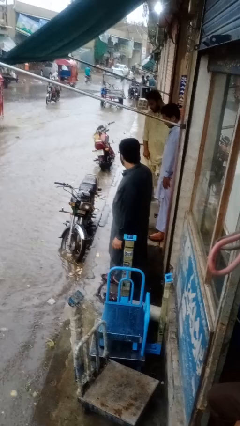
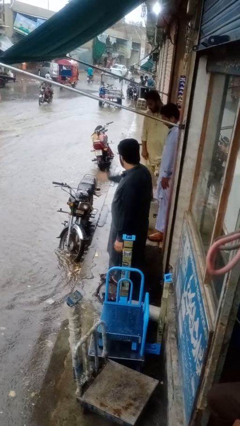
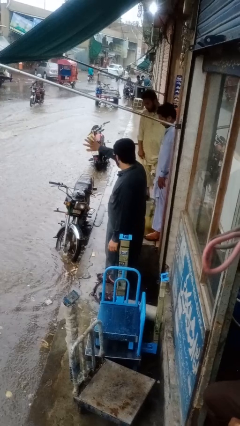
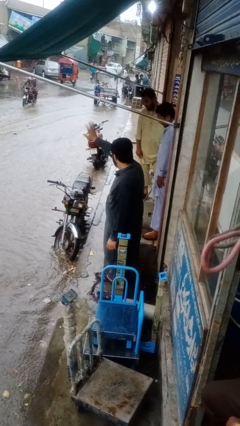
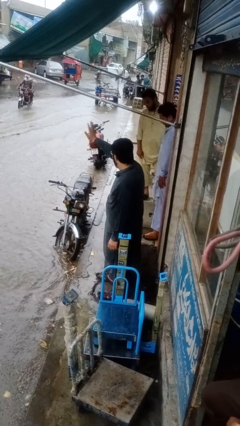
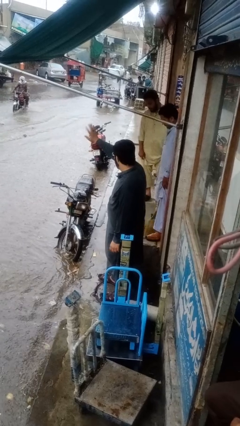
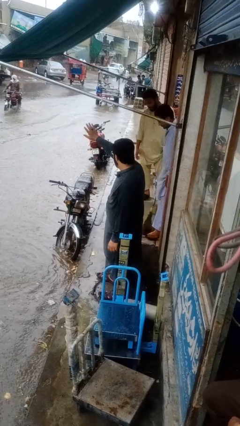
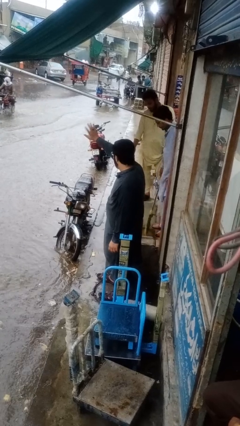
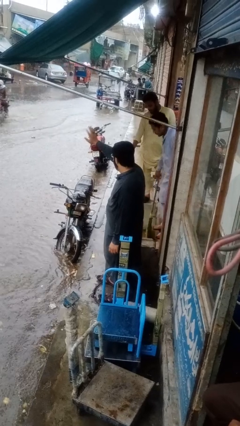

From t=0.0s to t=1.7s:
person waves at person

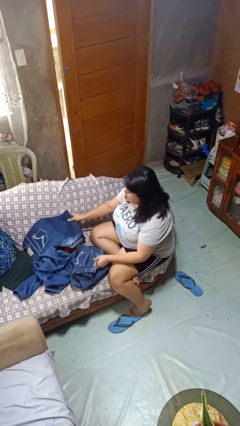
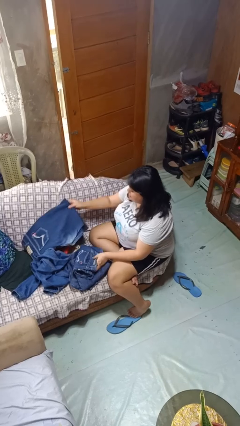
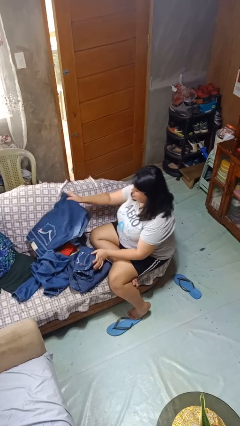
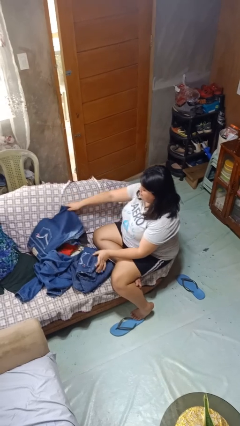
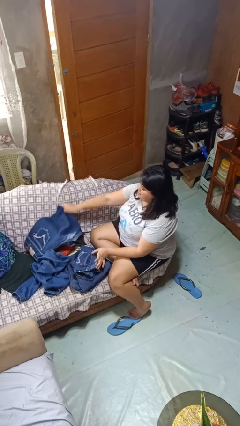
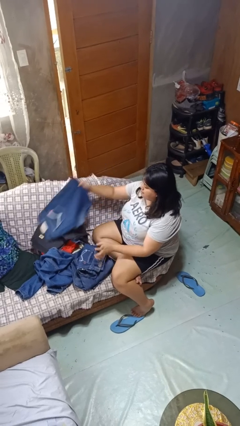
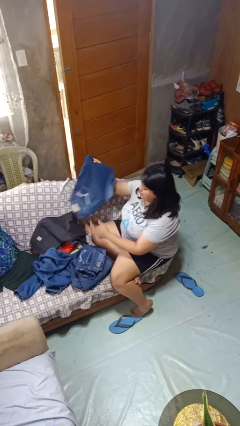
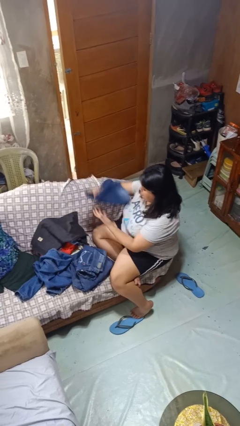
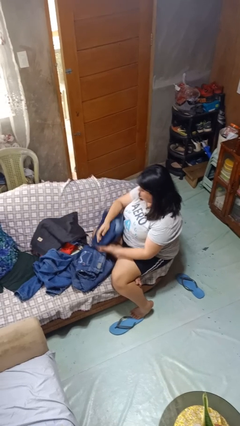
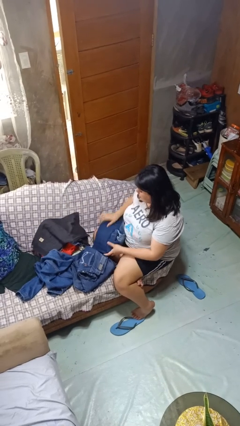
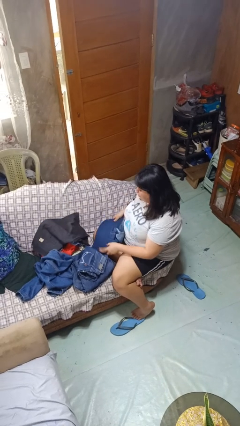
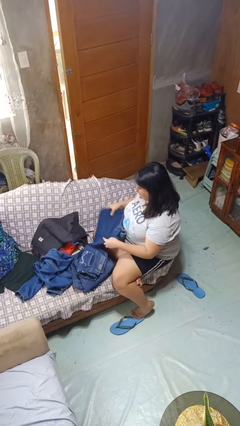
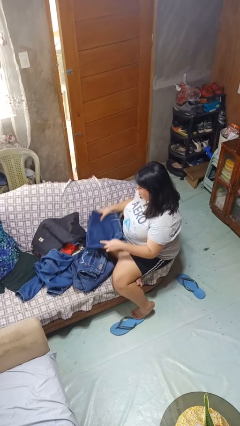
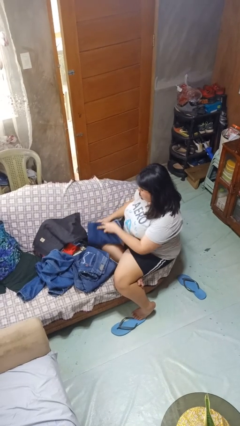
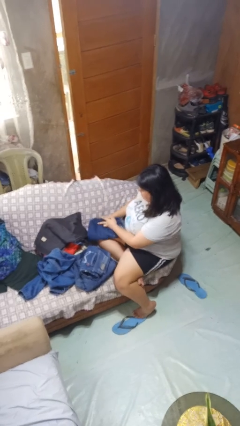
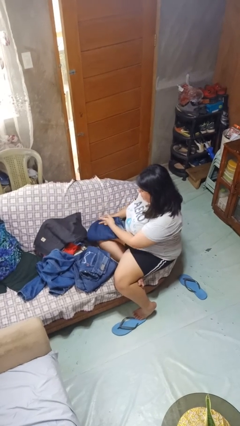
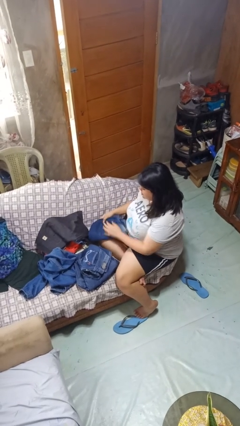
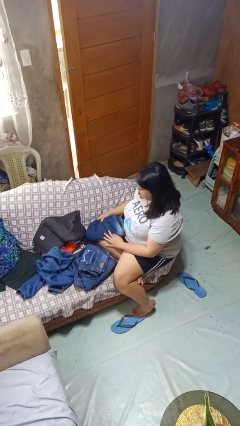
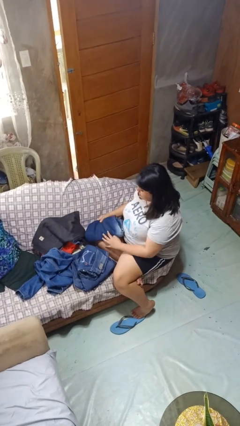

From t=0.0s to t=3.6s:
person folds pants

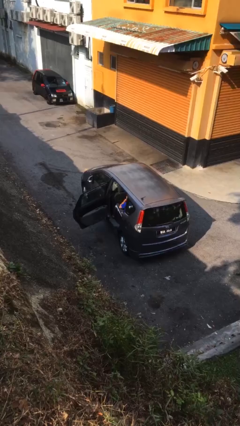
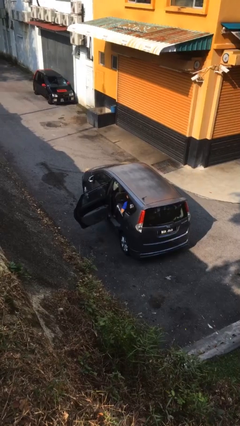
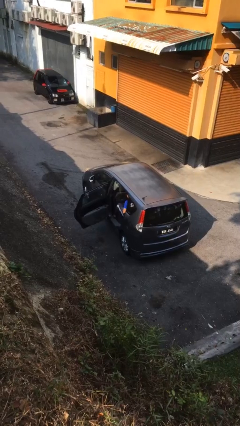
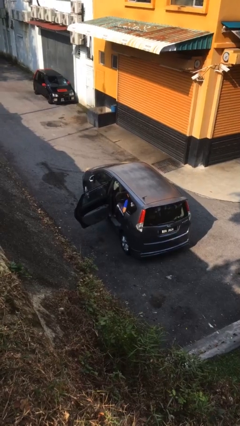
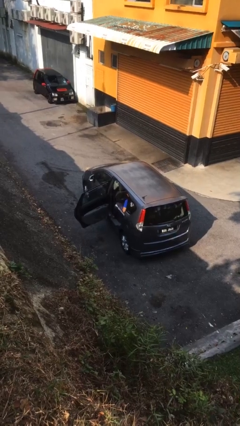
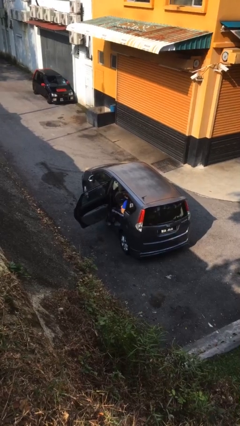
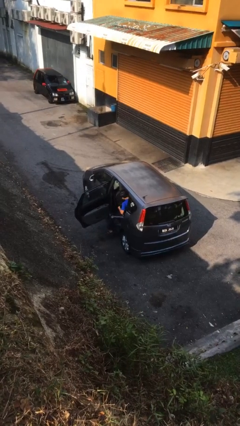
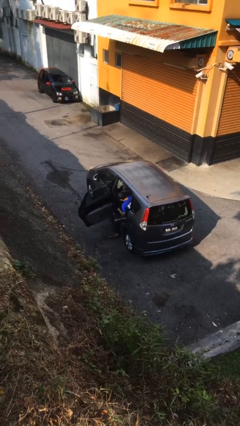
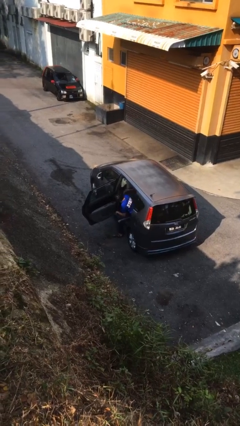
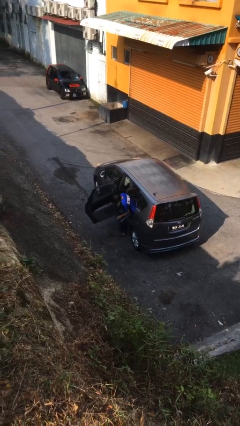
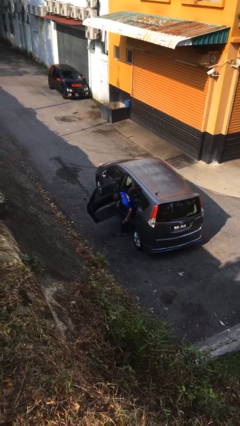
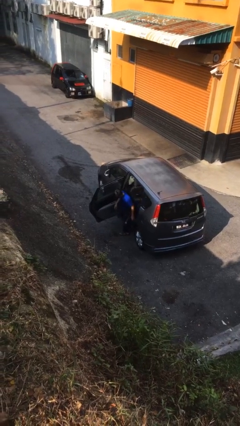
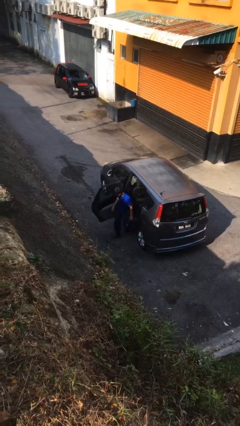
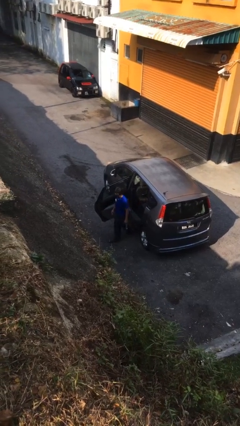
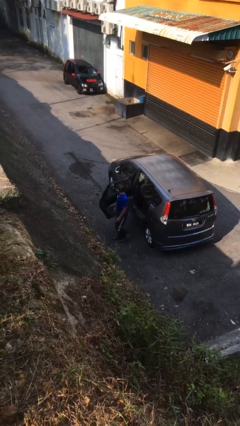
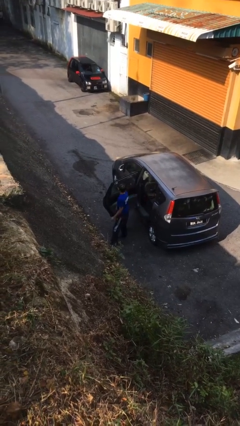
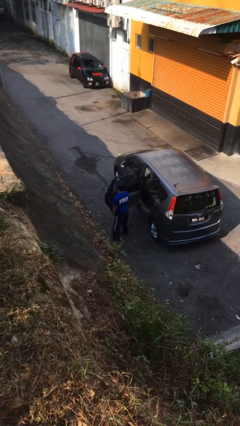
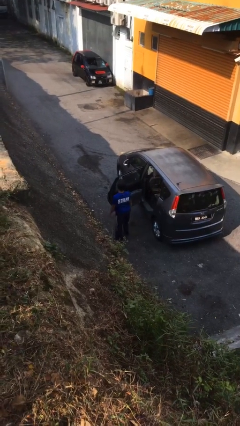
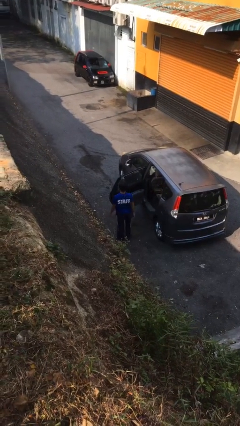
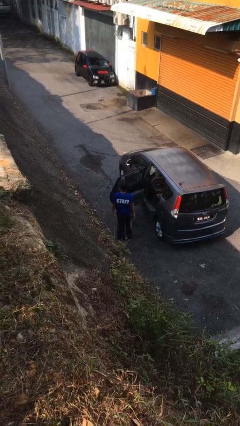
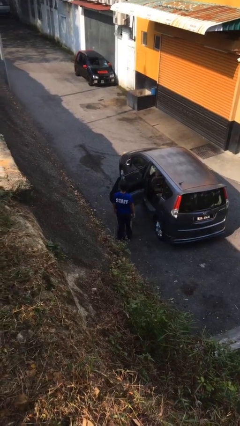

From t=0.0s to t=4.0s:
person exits car

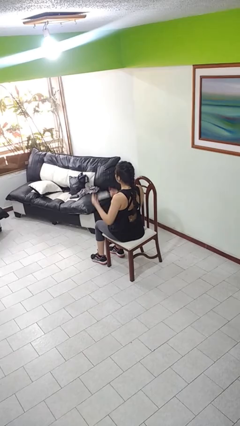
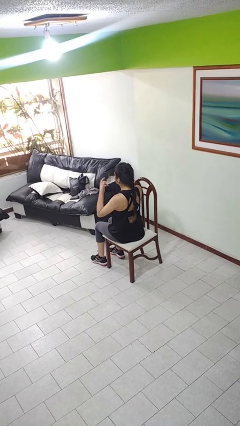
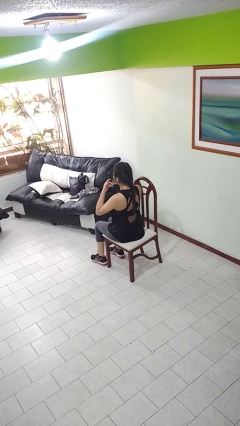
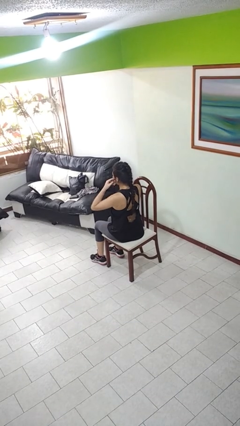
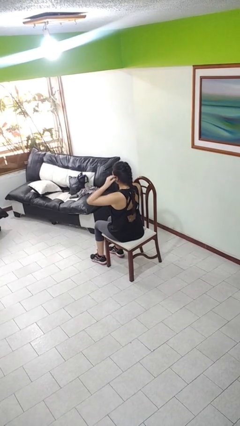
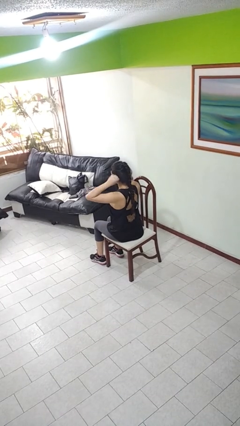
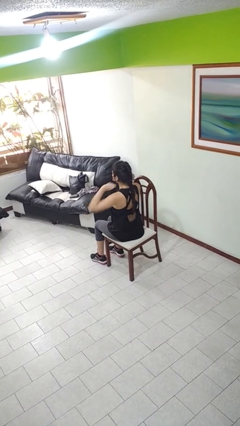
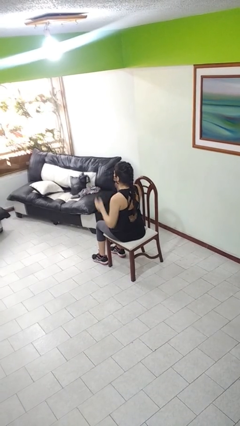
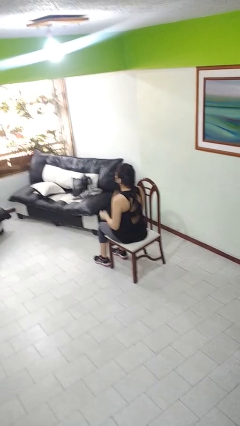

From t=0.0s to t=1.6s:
person puts on facemask

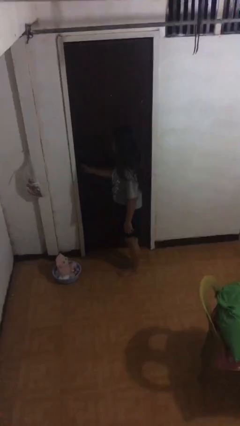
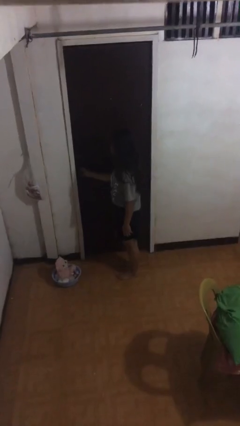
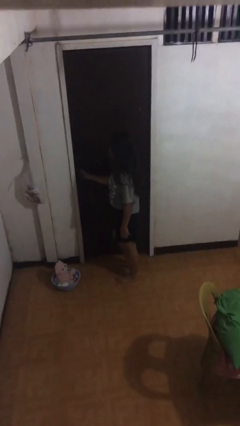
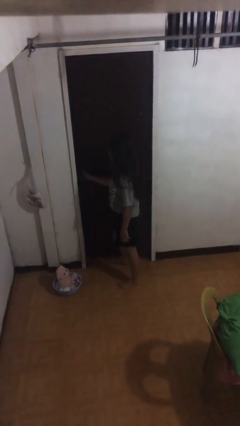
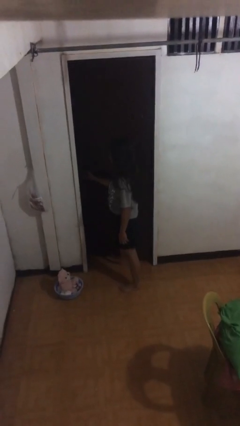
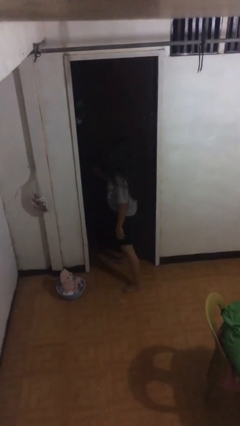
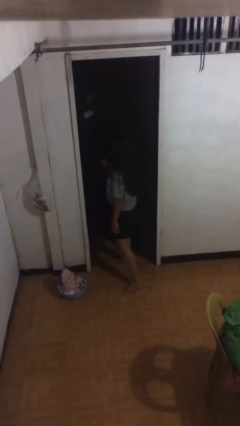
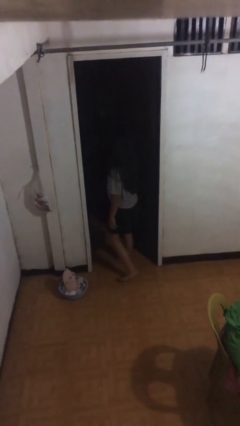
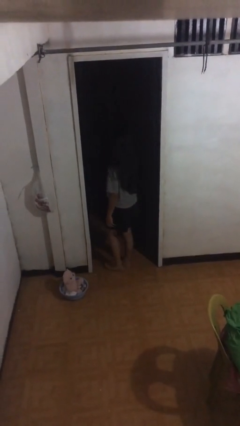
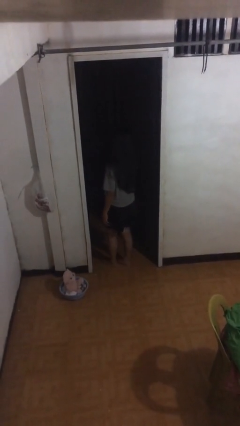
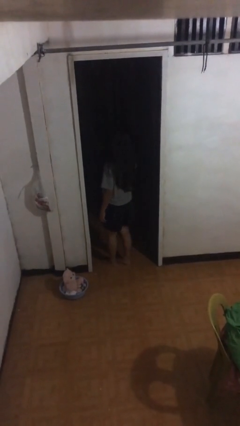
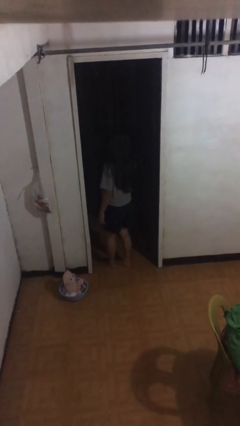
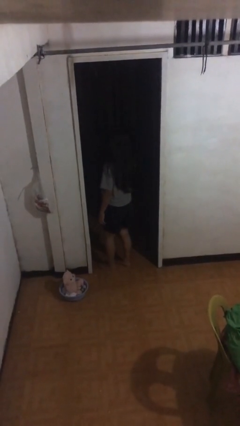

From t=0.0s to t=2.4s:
person opens facility door

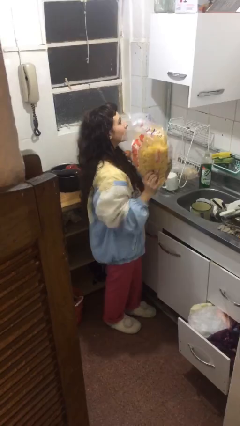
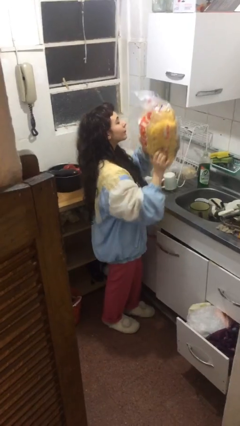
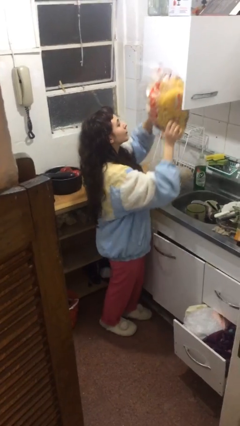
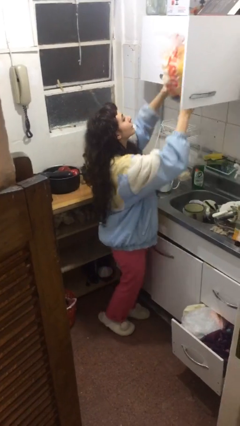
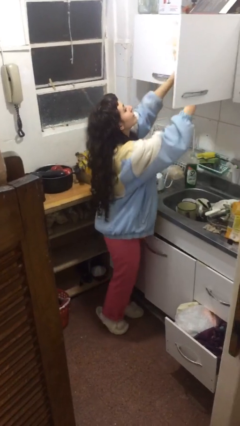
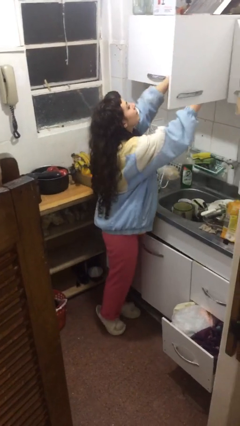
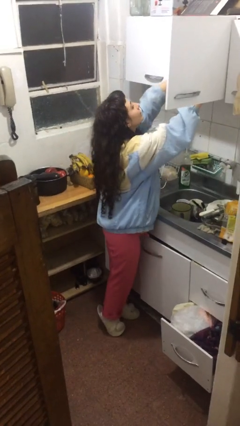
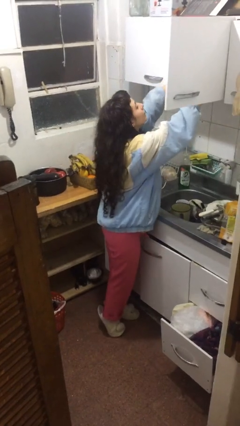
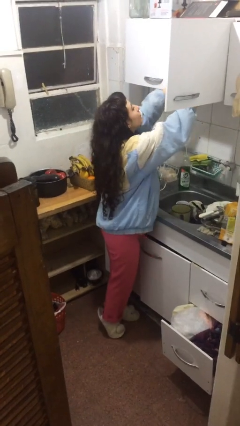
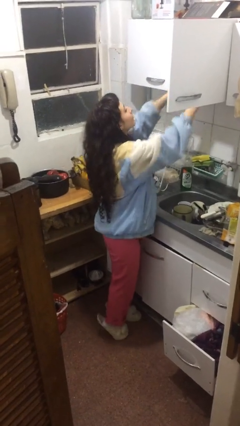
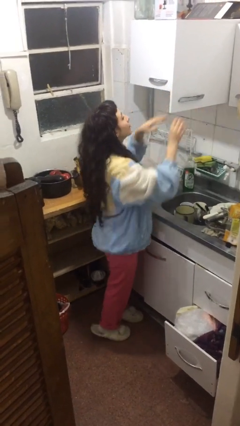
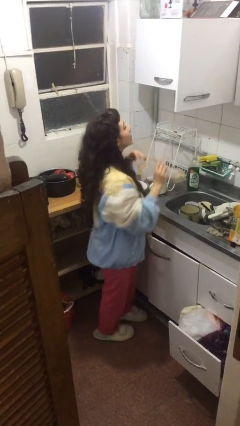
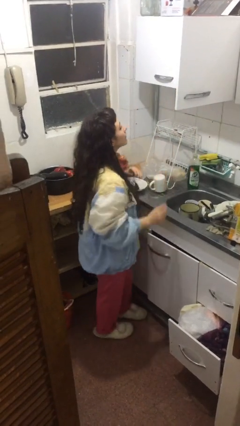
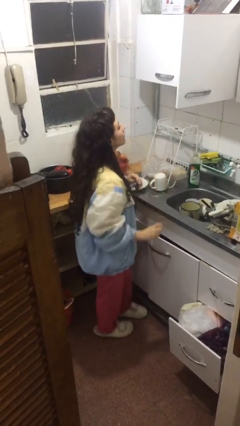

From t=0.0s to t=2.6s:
person puts down object into cabinet

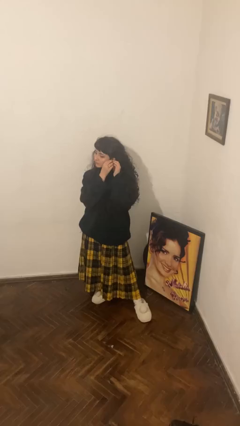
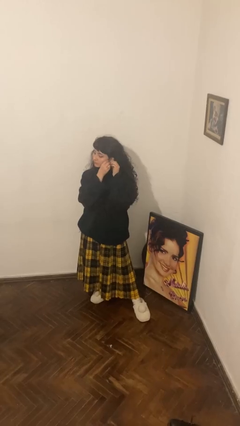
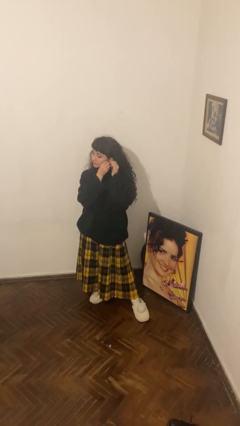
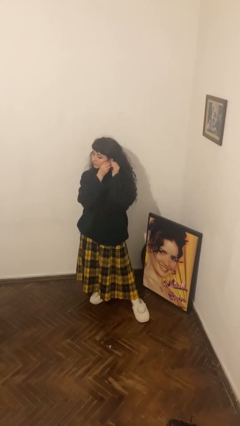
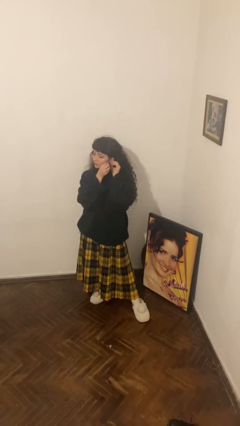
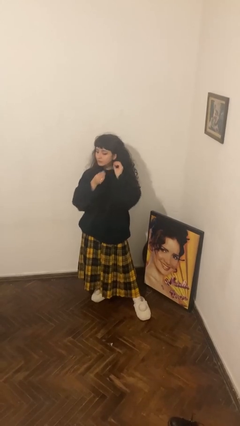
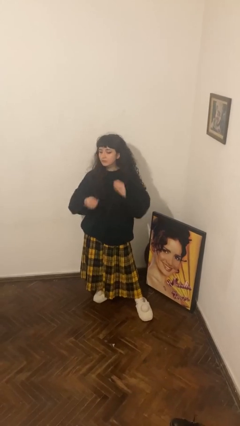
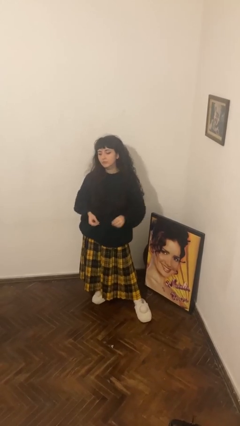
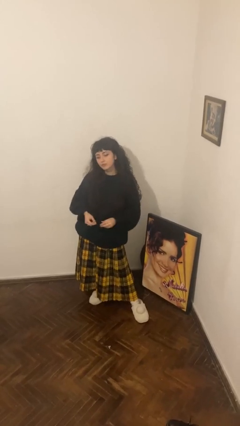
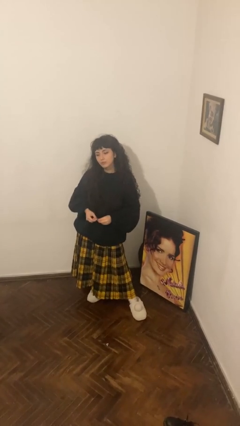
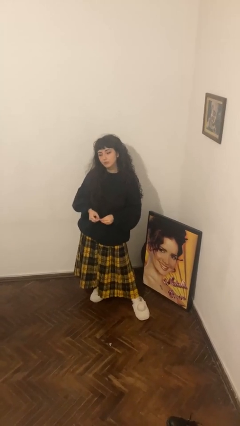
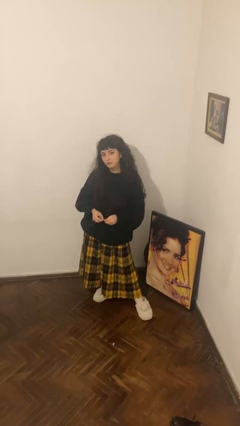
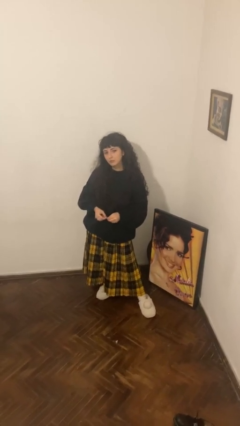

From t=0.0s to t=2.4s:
person takes off earrings
